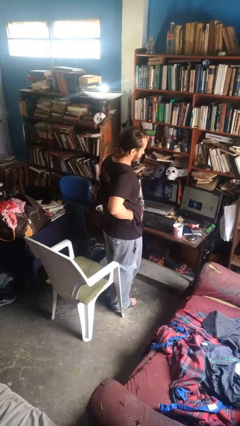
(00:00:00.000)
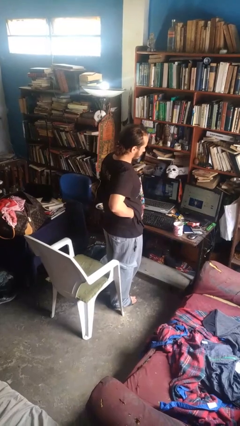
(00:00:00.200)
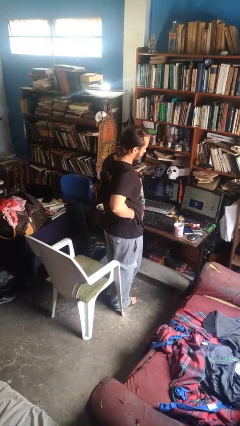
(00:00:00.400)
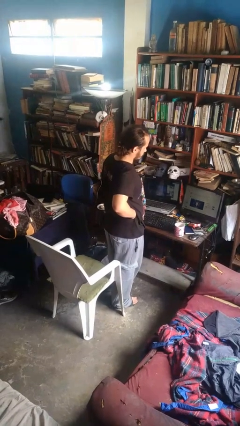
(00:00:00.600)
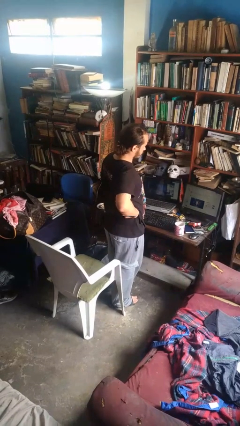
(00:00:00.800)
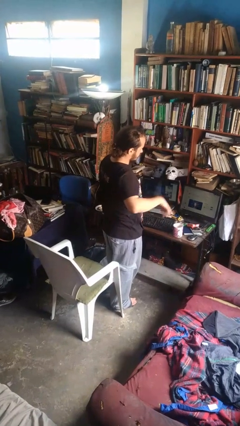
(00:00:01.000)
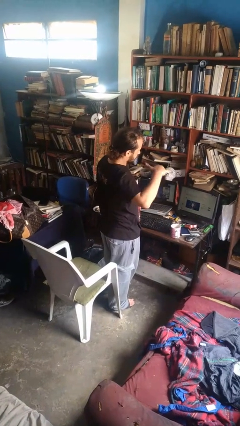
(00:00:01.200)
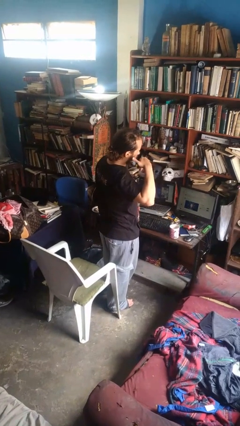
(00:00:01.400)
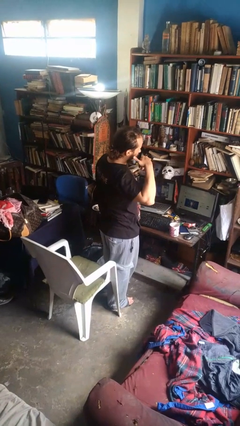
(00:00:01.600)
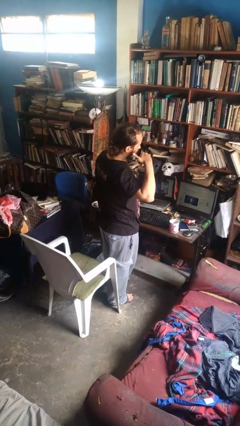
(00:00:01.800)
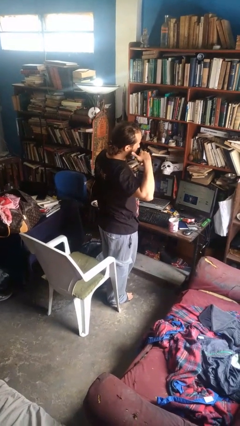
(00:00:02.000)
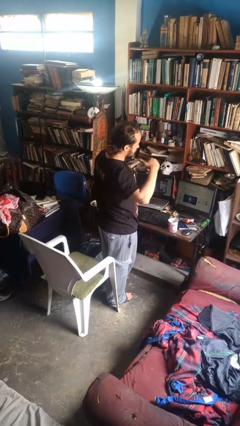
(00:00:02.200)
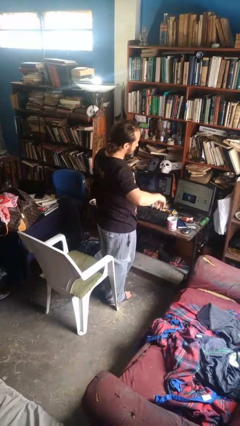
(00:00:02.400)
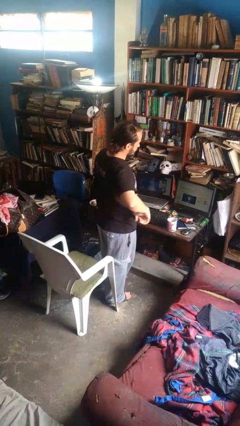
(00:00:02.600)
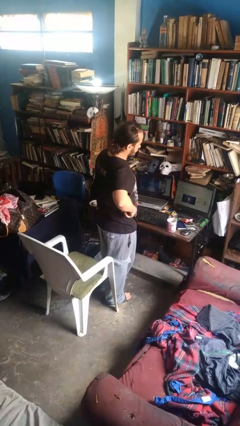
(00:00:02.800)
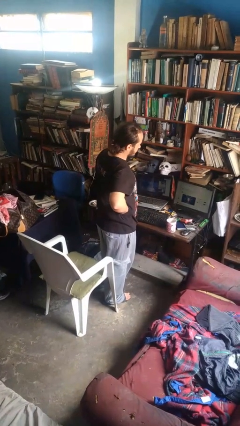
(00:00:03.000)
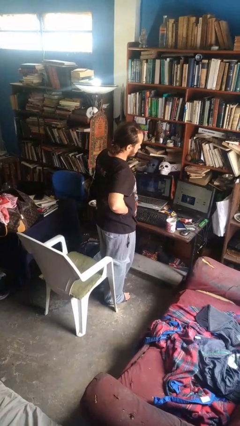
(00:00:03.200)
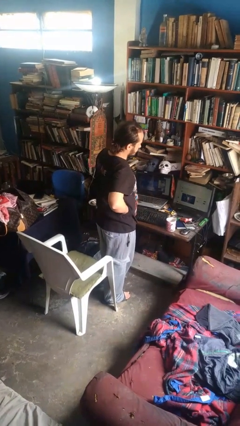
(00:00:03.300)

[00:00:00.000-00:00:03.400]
person gestures call me

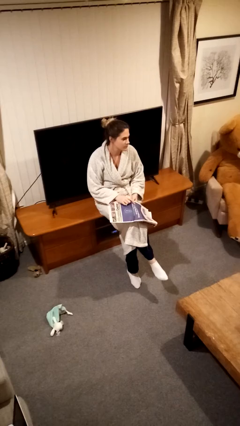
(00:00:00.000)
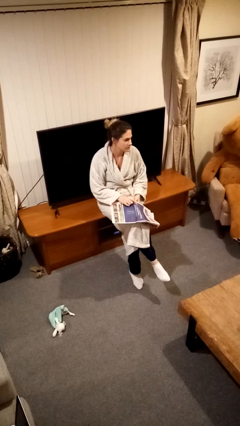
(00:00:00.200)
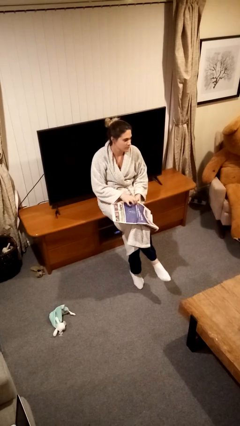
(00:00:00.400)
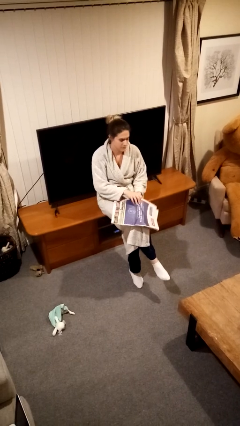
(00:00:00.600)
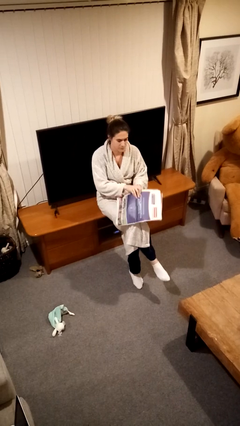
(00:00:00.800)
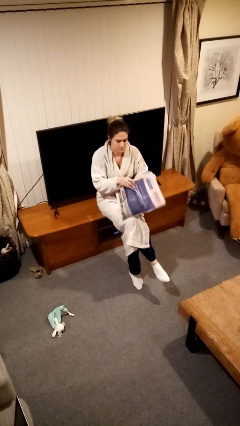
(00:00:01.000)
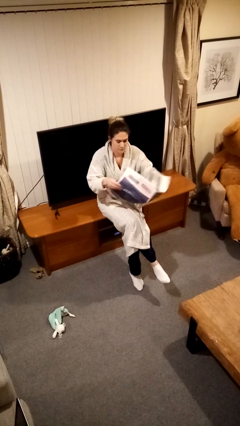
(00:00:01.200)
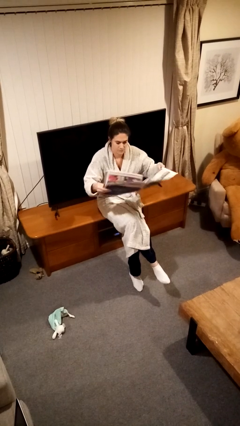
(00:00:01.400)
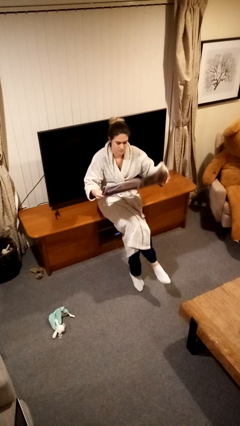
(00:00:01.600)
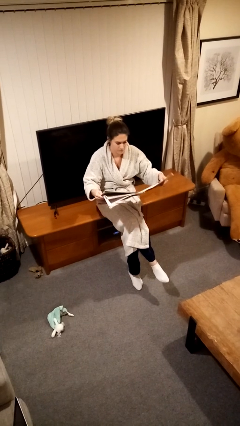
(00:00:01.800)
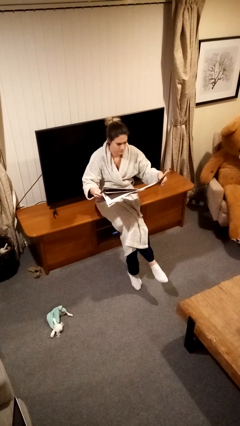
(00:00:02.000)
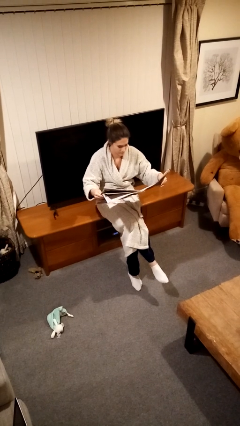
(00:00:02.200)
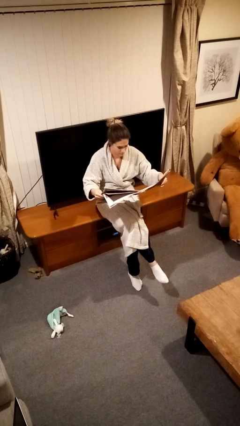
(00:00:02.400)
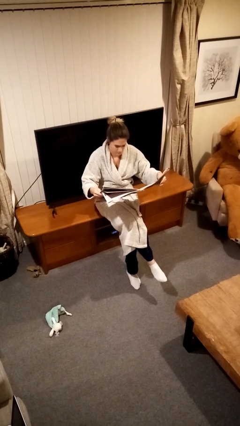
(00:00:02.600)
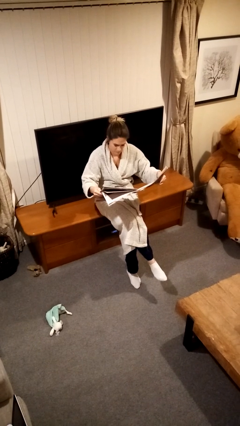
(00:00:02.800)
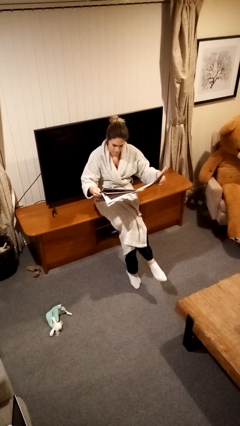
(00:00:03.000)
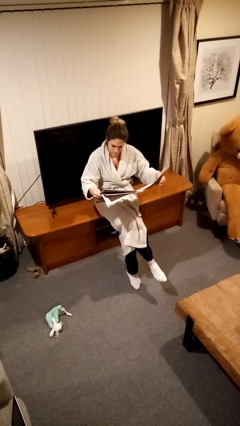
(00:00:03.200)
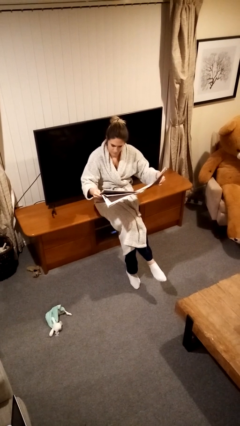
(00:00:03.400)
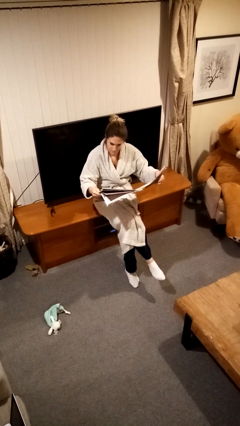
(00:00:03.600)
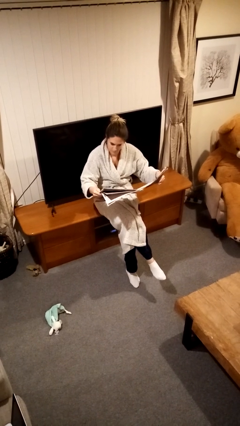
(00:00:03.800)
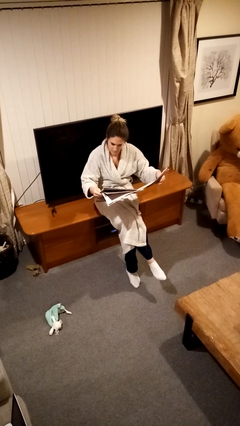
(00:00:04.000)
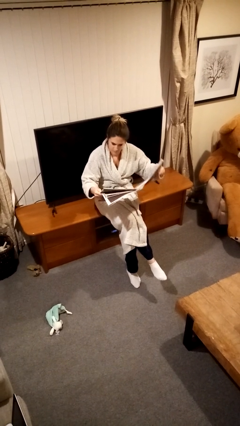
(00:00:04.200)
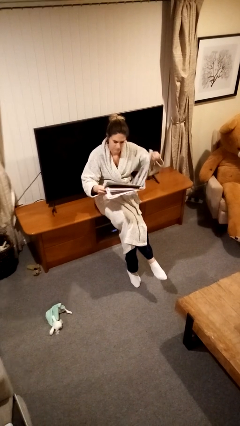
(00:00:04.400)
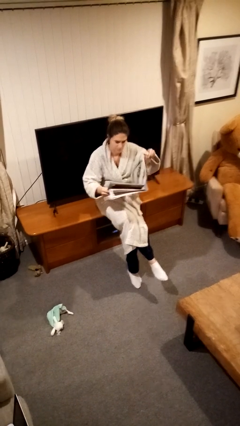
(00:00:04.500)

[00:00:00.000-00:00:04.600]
person reads newspaper

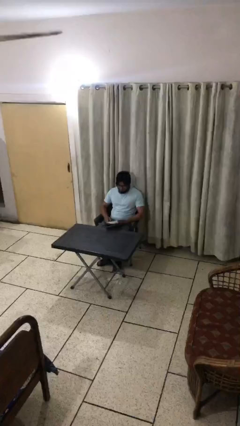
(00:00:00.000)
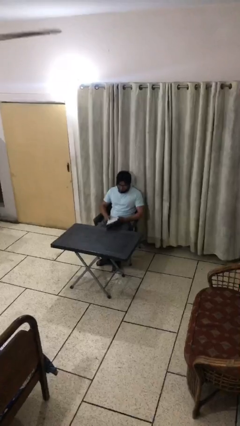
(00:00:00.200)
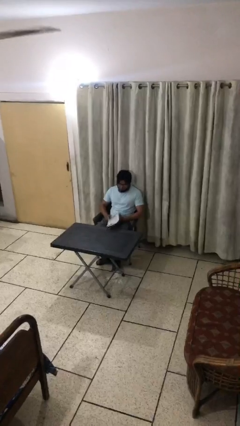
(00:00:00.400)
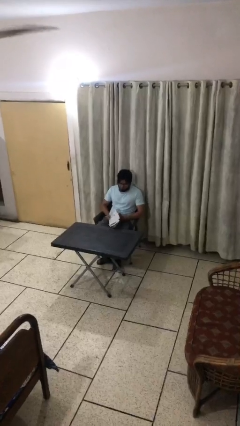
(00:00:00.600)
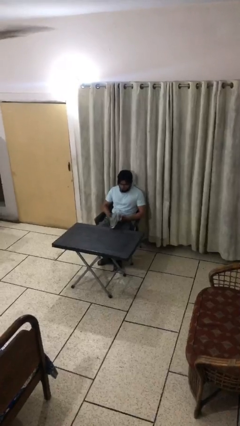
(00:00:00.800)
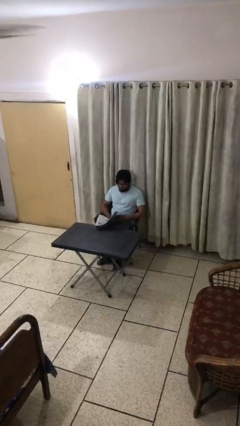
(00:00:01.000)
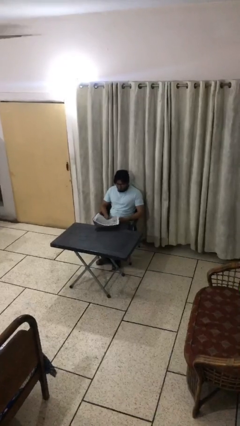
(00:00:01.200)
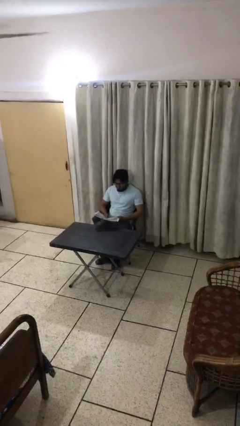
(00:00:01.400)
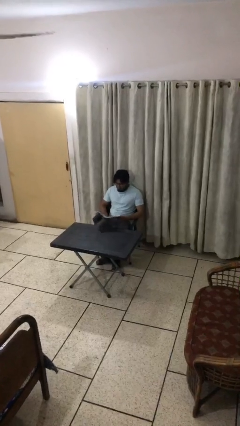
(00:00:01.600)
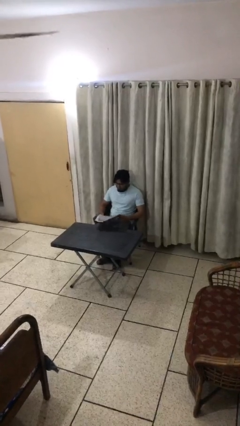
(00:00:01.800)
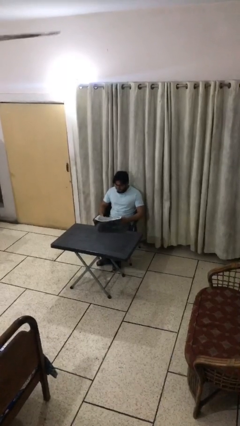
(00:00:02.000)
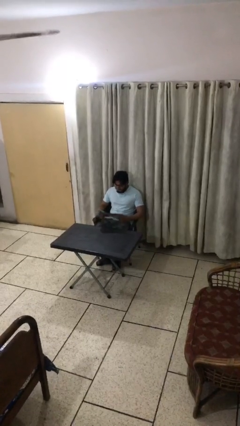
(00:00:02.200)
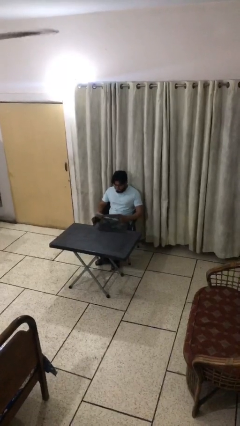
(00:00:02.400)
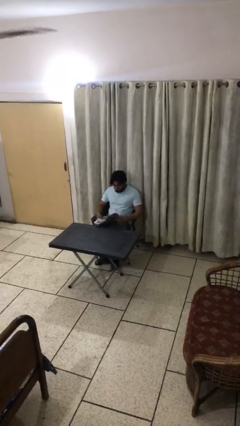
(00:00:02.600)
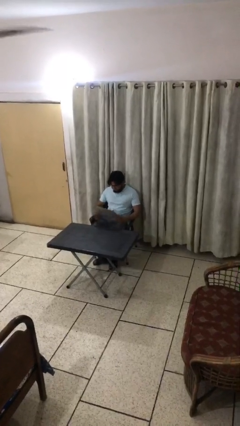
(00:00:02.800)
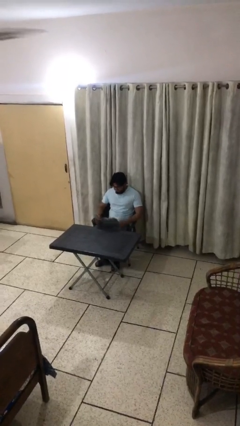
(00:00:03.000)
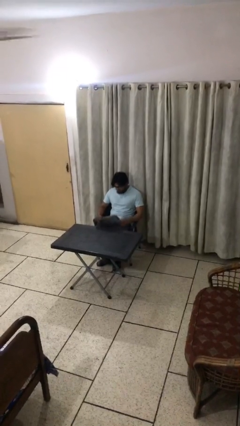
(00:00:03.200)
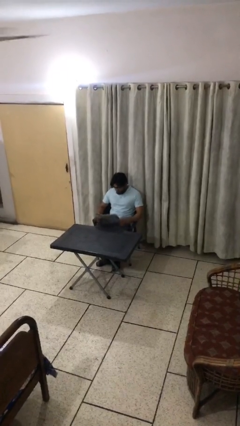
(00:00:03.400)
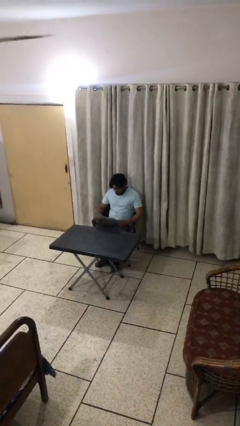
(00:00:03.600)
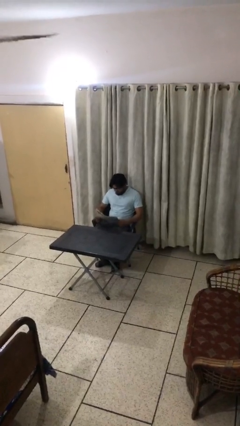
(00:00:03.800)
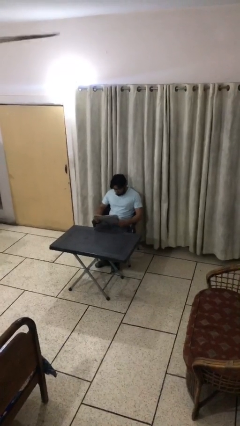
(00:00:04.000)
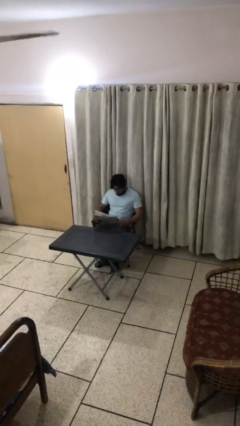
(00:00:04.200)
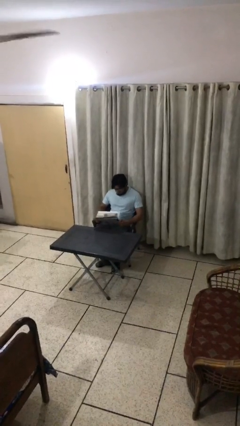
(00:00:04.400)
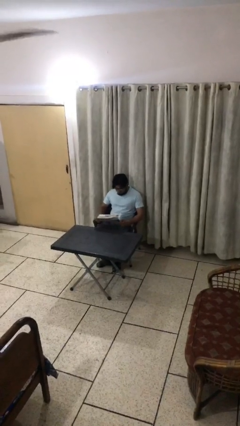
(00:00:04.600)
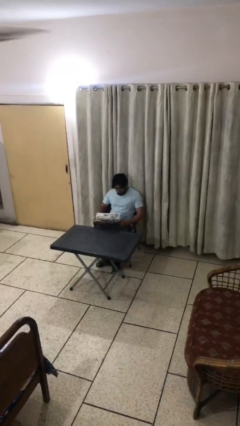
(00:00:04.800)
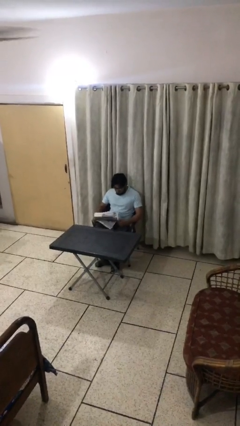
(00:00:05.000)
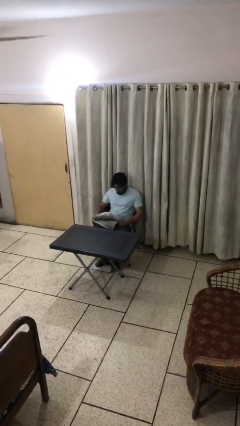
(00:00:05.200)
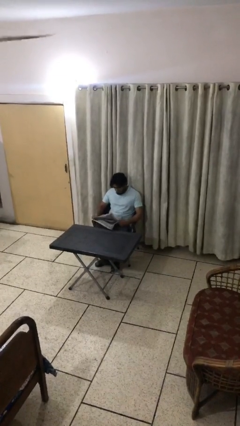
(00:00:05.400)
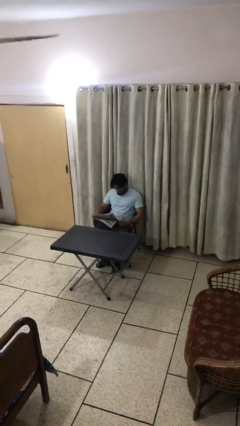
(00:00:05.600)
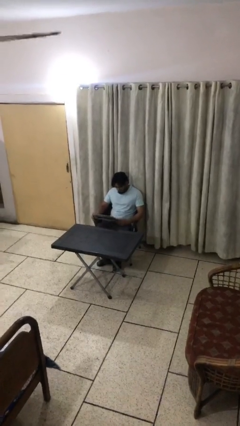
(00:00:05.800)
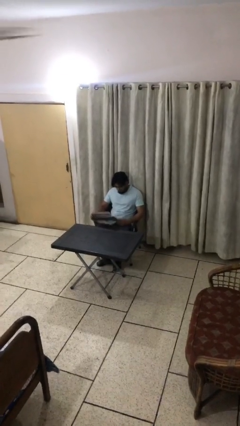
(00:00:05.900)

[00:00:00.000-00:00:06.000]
person reads document

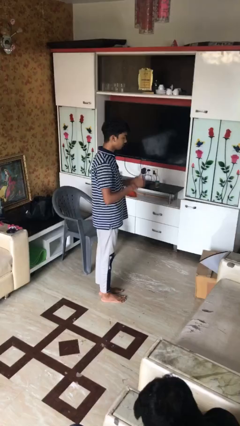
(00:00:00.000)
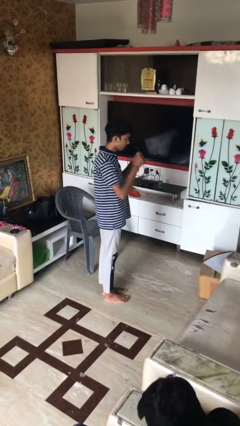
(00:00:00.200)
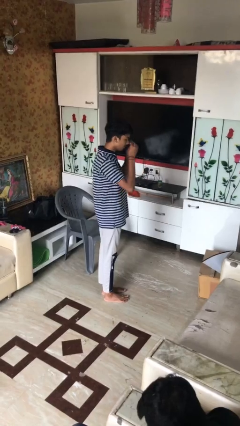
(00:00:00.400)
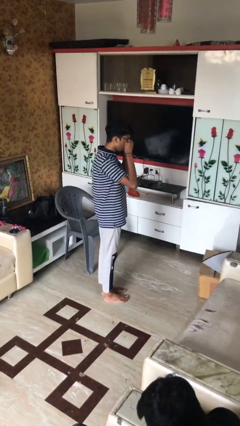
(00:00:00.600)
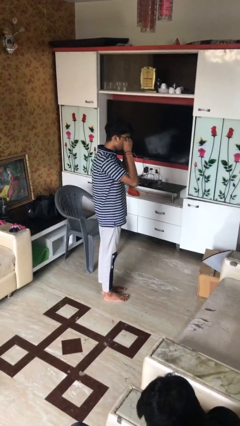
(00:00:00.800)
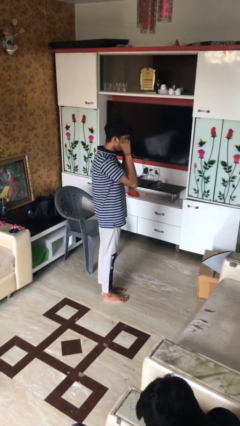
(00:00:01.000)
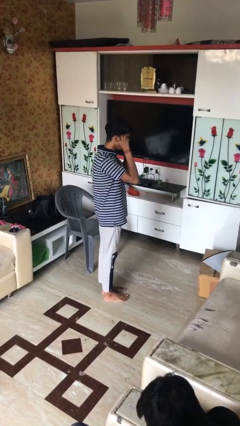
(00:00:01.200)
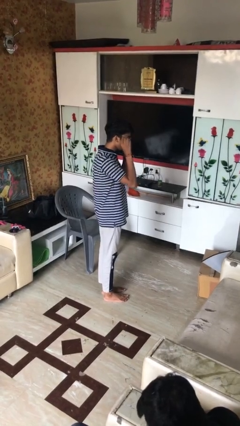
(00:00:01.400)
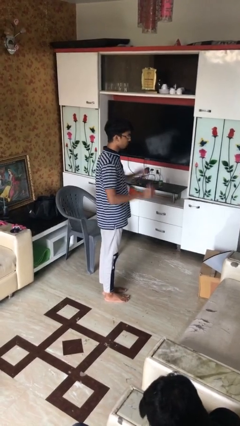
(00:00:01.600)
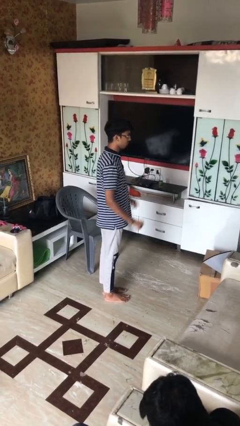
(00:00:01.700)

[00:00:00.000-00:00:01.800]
person puts on glasses

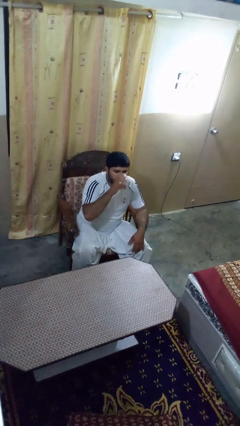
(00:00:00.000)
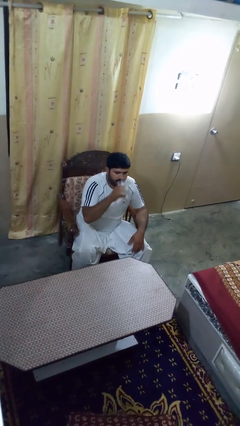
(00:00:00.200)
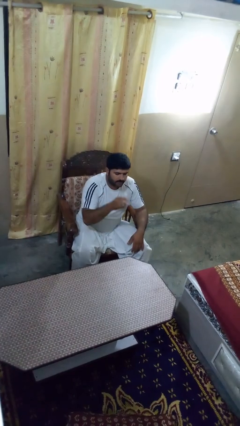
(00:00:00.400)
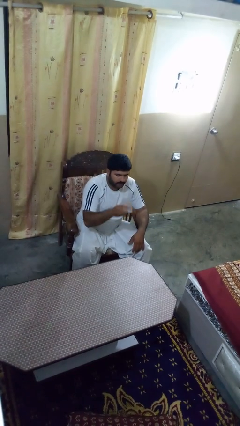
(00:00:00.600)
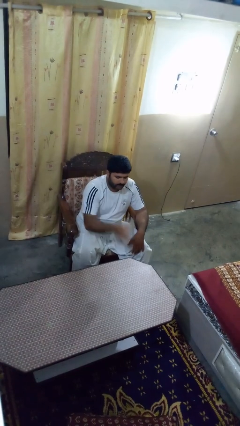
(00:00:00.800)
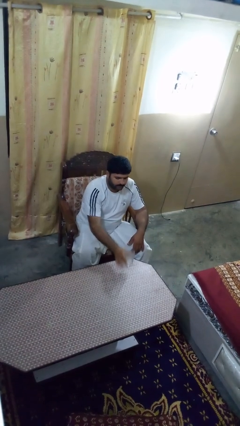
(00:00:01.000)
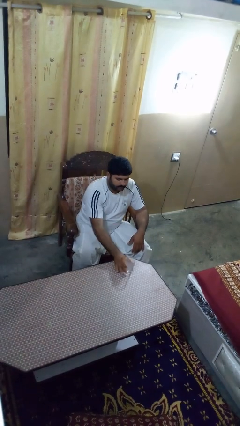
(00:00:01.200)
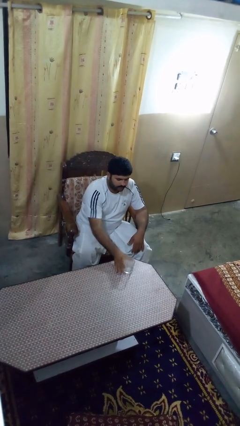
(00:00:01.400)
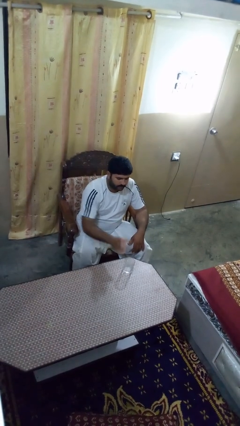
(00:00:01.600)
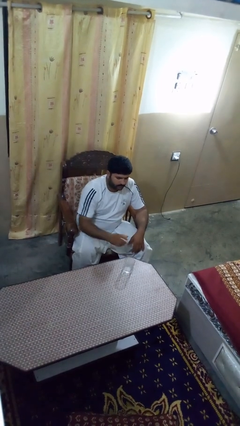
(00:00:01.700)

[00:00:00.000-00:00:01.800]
person puts down object on table
